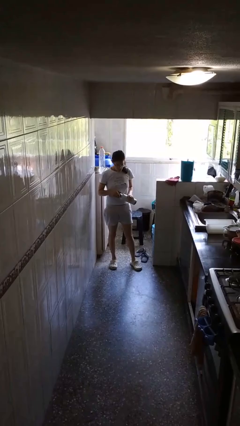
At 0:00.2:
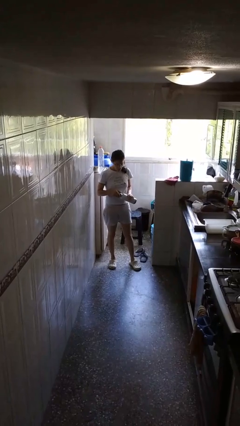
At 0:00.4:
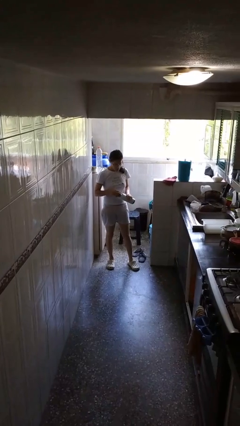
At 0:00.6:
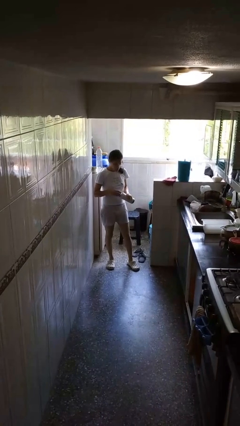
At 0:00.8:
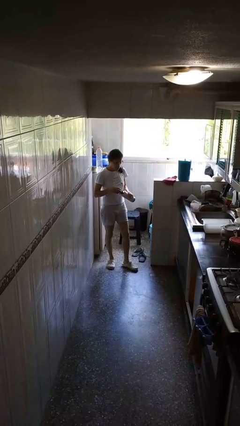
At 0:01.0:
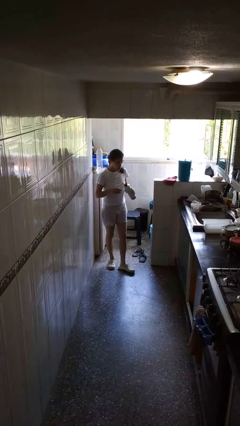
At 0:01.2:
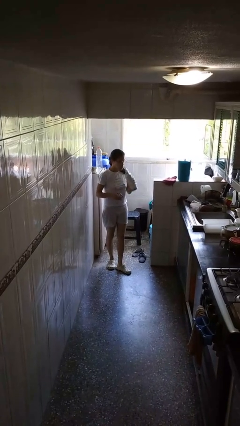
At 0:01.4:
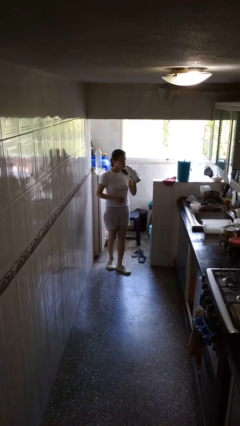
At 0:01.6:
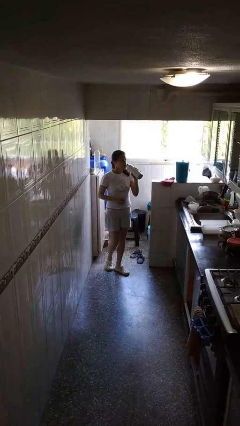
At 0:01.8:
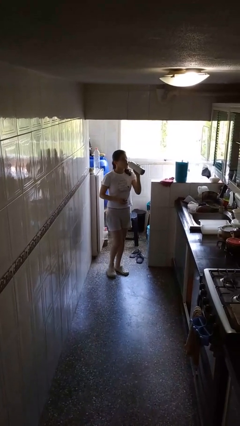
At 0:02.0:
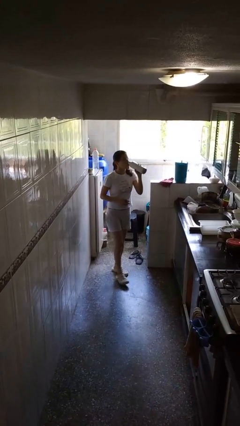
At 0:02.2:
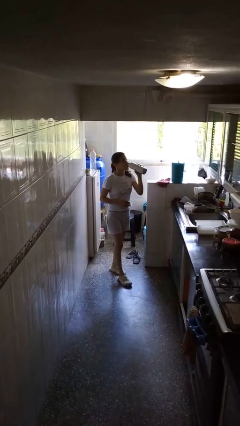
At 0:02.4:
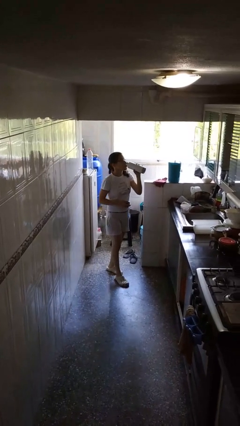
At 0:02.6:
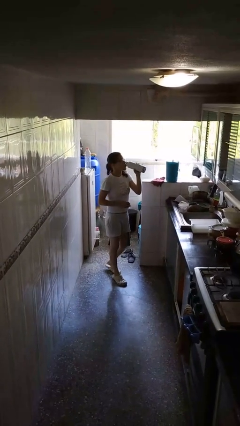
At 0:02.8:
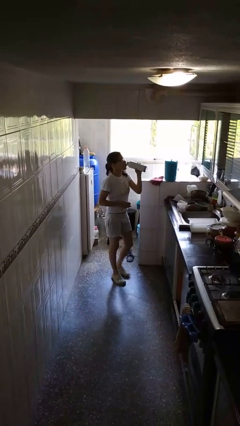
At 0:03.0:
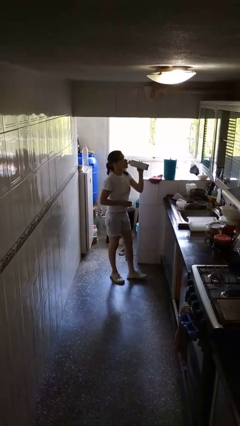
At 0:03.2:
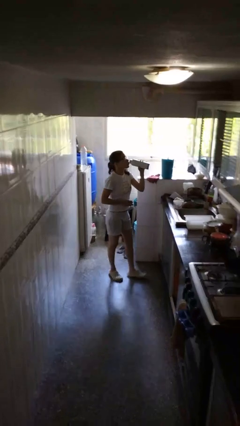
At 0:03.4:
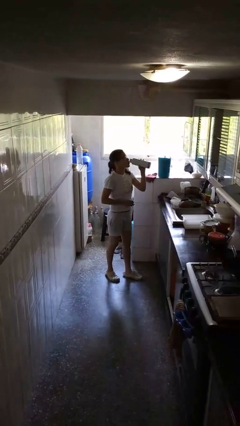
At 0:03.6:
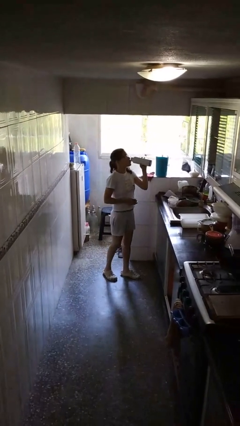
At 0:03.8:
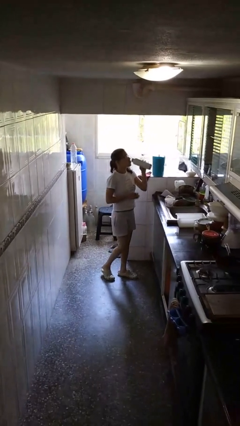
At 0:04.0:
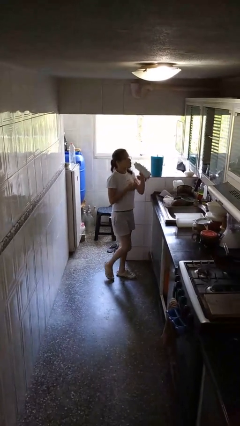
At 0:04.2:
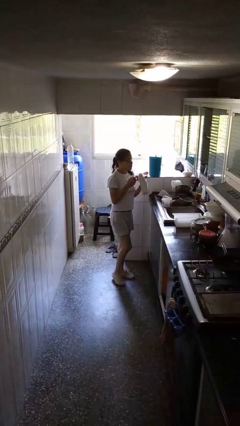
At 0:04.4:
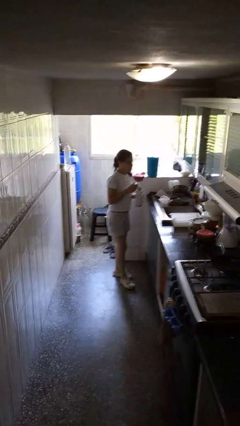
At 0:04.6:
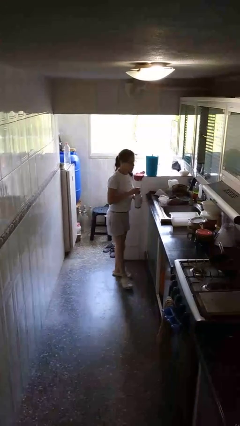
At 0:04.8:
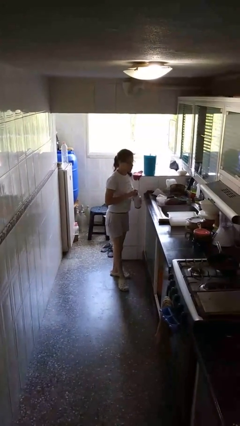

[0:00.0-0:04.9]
person drinks from bottle

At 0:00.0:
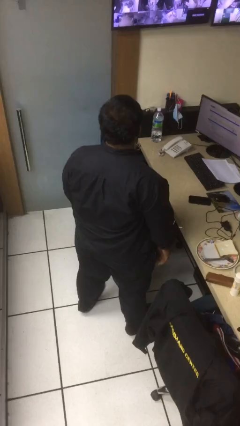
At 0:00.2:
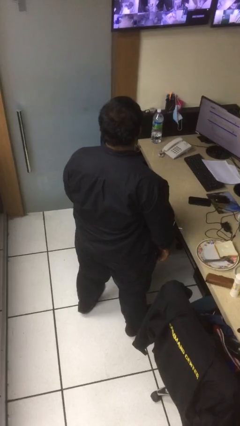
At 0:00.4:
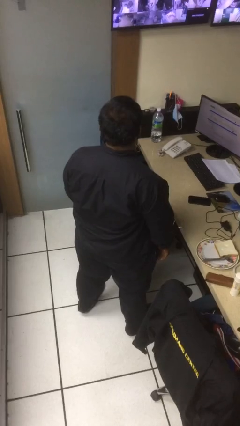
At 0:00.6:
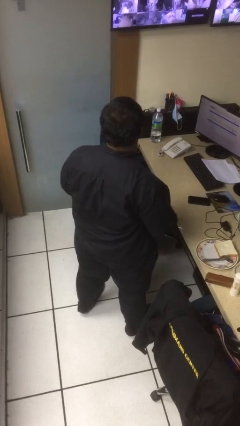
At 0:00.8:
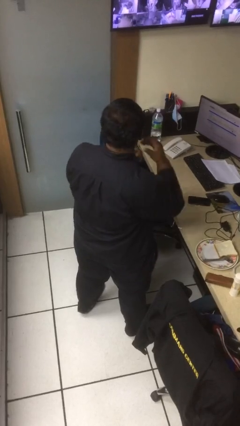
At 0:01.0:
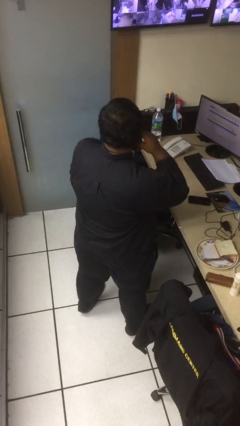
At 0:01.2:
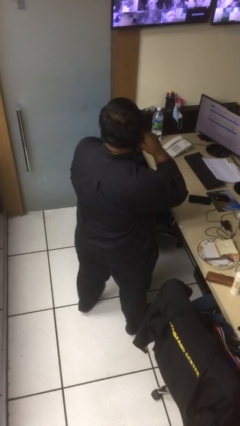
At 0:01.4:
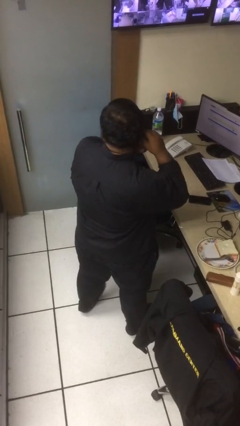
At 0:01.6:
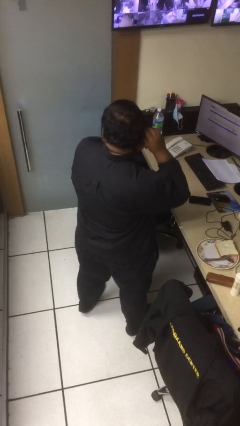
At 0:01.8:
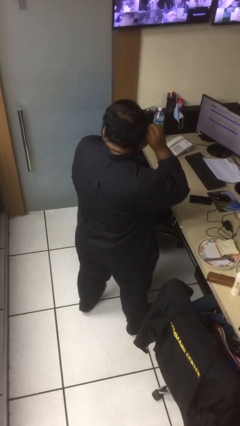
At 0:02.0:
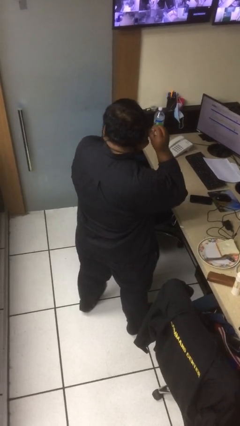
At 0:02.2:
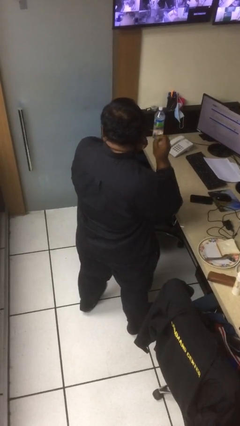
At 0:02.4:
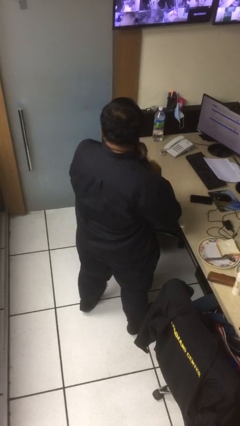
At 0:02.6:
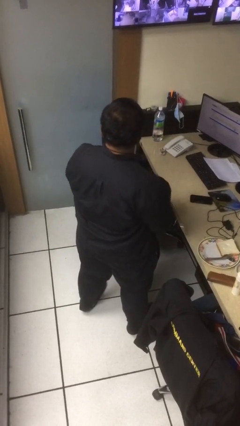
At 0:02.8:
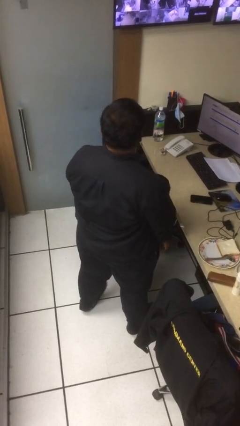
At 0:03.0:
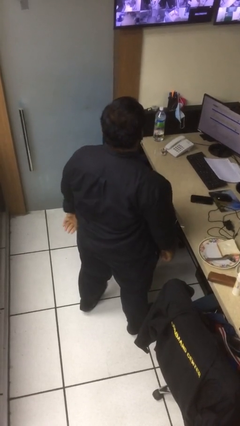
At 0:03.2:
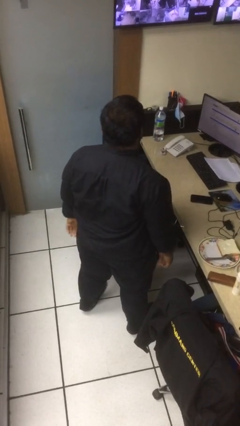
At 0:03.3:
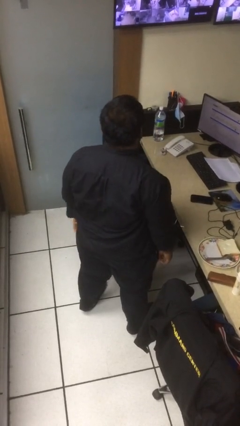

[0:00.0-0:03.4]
person takes off earrings

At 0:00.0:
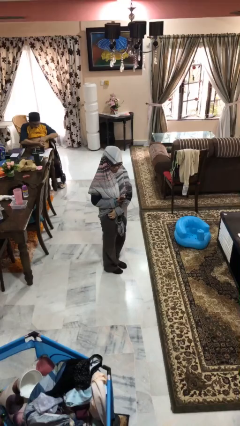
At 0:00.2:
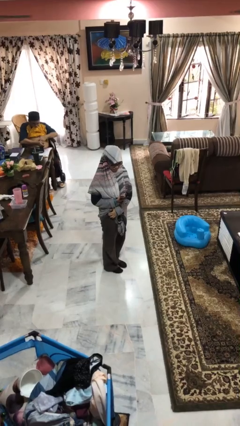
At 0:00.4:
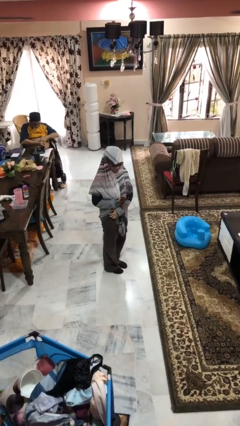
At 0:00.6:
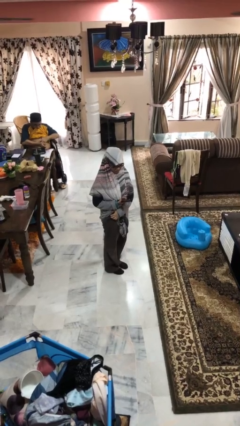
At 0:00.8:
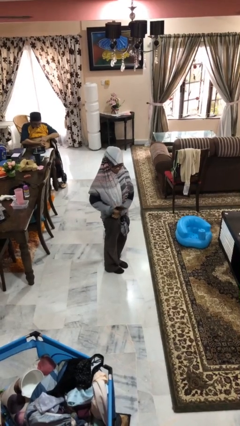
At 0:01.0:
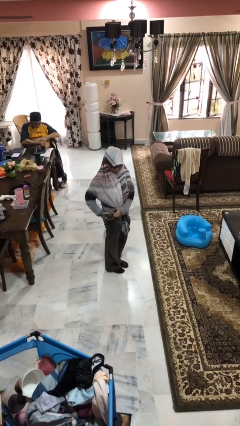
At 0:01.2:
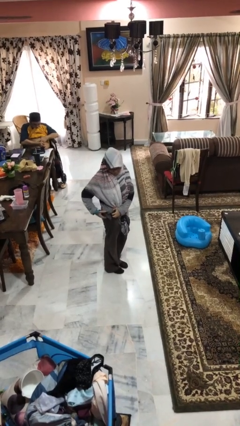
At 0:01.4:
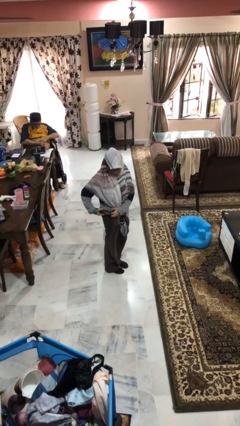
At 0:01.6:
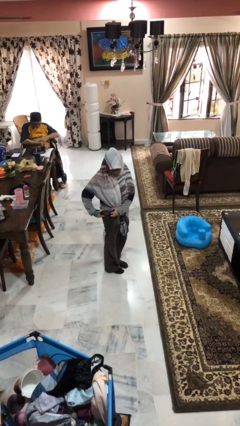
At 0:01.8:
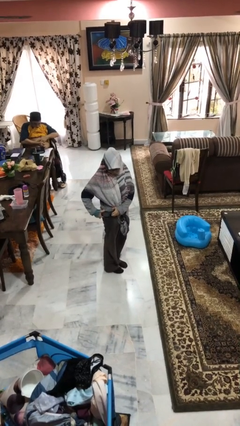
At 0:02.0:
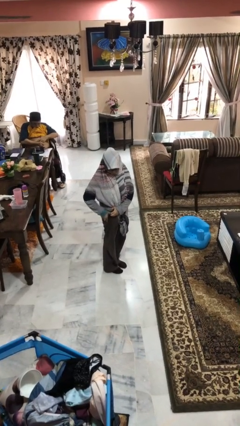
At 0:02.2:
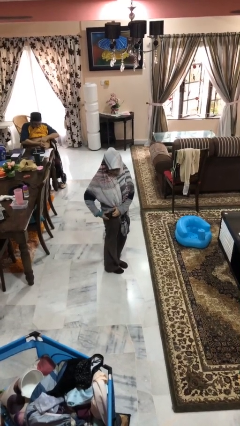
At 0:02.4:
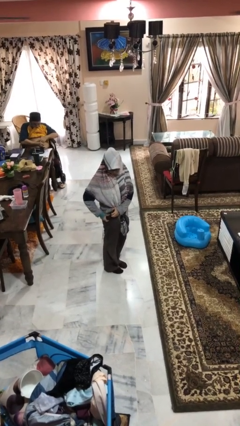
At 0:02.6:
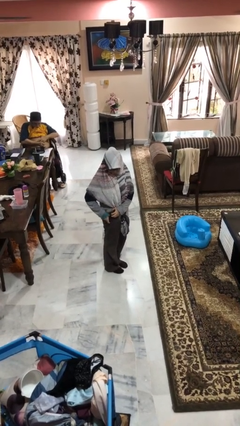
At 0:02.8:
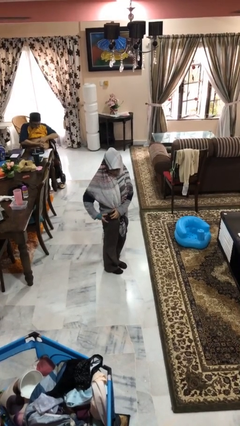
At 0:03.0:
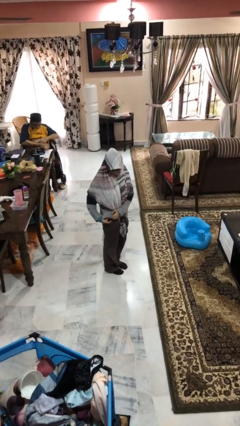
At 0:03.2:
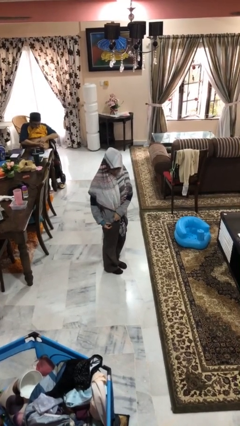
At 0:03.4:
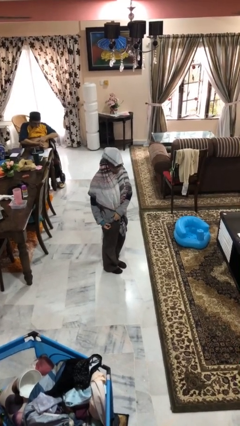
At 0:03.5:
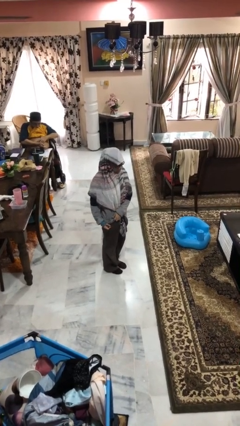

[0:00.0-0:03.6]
person puts phone into pocket

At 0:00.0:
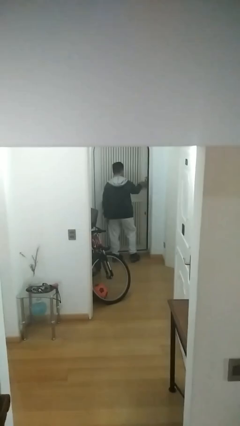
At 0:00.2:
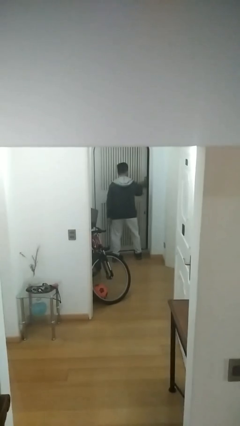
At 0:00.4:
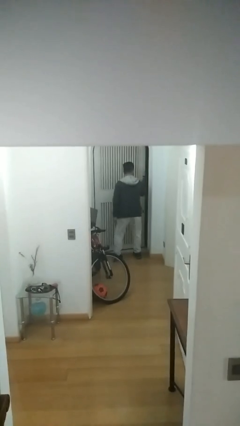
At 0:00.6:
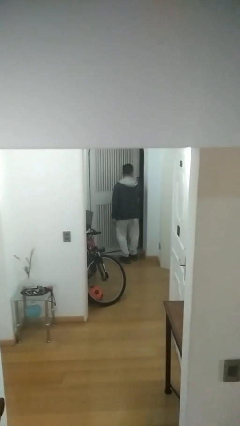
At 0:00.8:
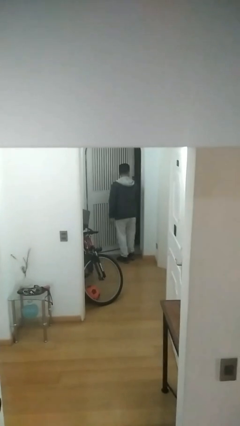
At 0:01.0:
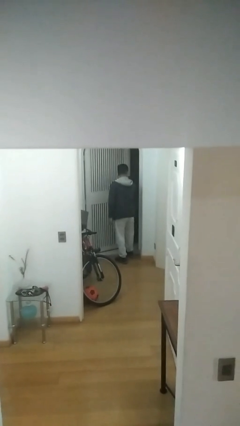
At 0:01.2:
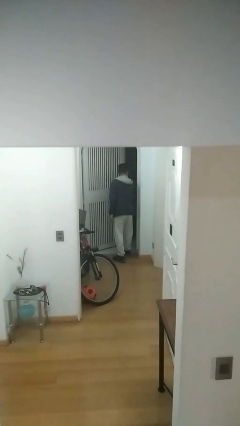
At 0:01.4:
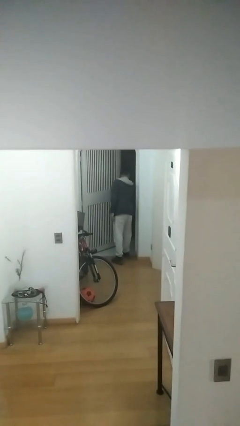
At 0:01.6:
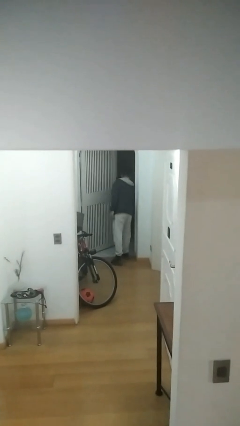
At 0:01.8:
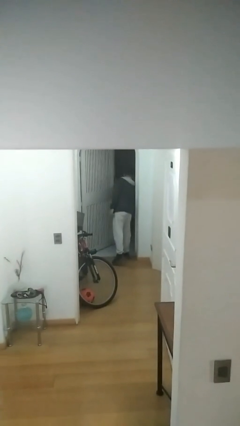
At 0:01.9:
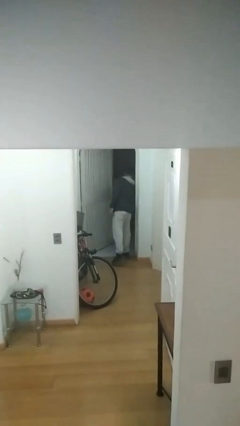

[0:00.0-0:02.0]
person opens facility door

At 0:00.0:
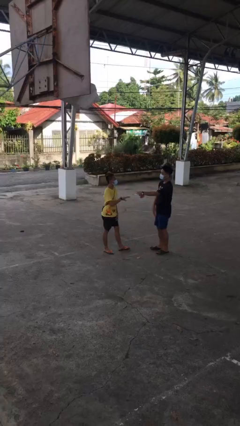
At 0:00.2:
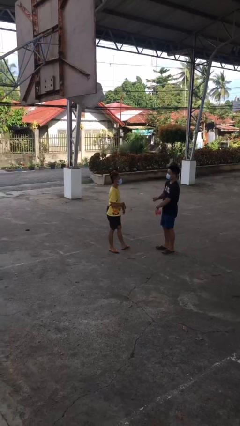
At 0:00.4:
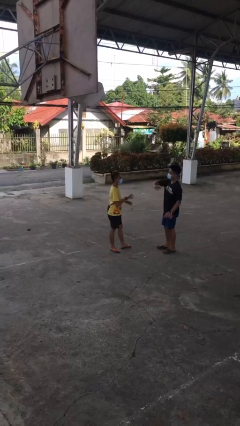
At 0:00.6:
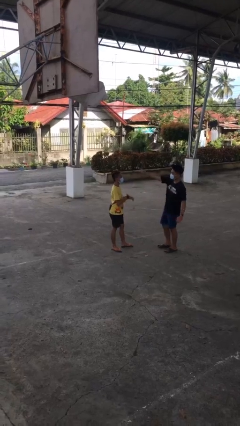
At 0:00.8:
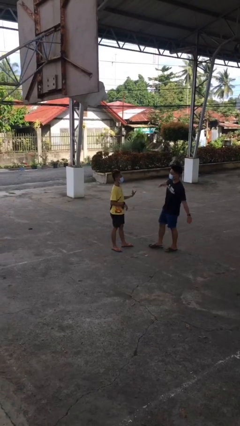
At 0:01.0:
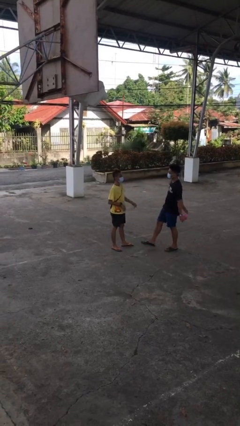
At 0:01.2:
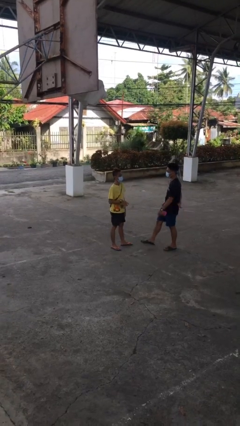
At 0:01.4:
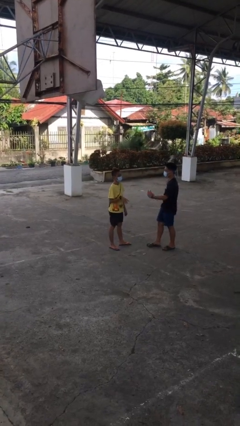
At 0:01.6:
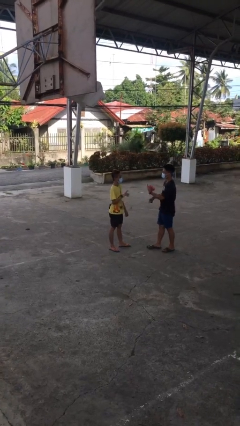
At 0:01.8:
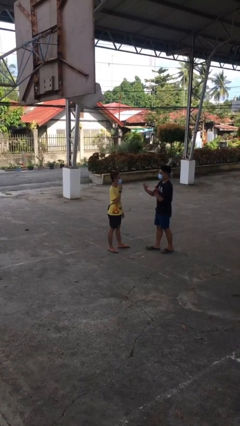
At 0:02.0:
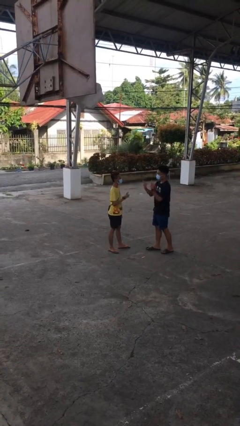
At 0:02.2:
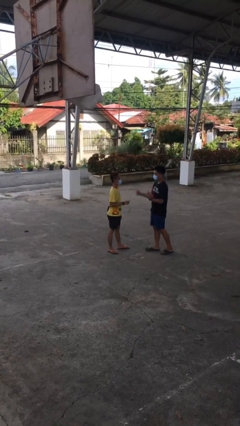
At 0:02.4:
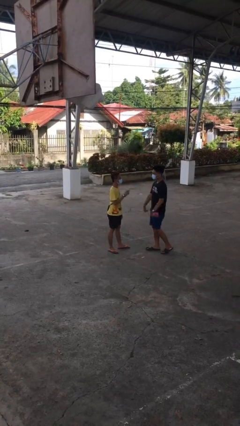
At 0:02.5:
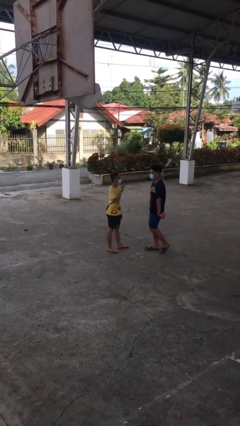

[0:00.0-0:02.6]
person talks to person

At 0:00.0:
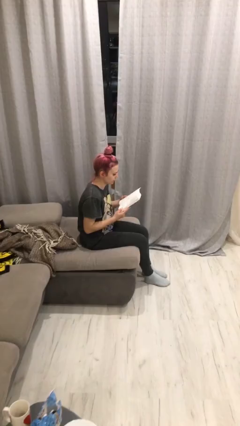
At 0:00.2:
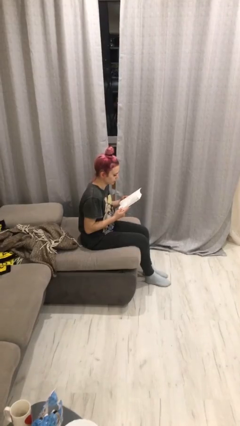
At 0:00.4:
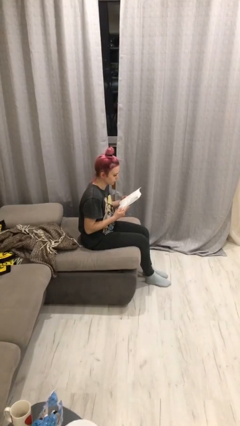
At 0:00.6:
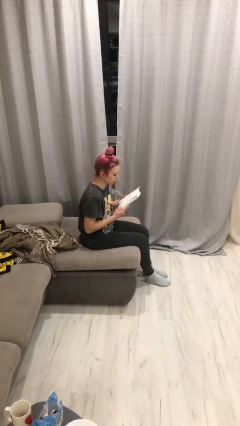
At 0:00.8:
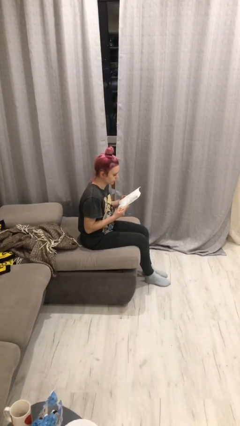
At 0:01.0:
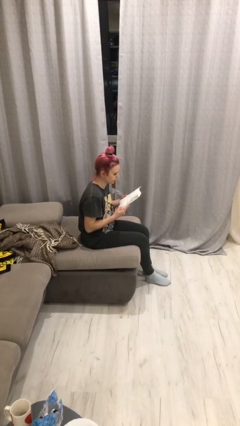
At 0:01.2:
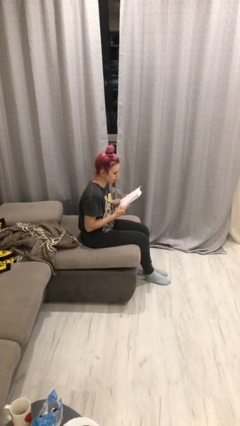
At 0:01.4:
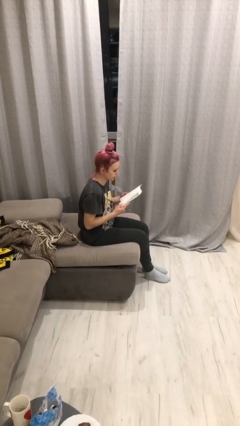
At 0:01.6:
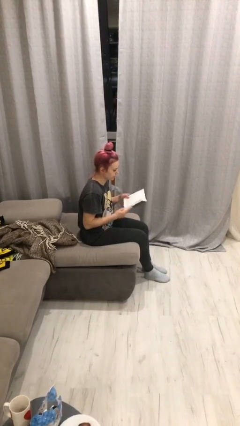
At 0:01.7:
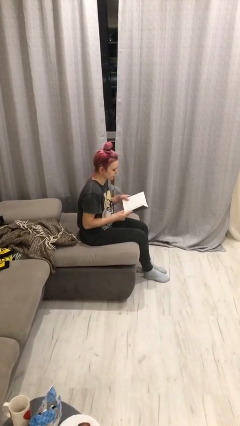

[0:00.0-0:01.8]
person reads document
